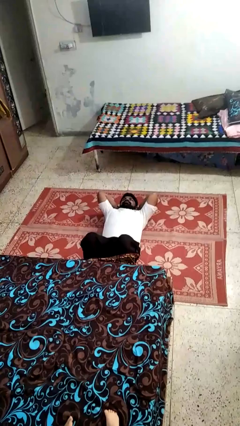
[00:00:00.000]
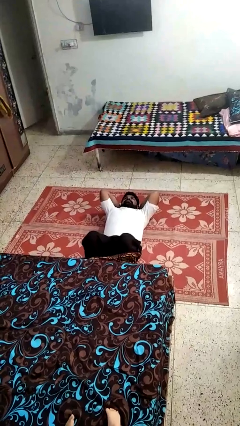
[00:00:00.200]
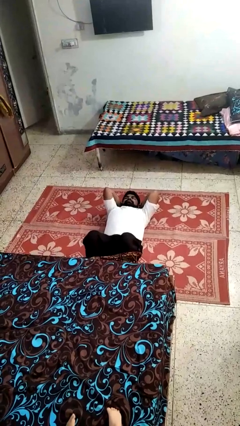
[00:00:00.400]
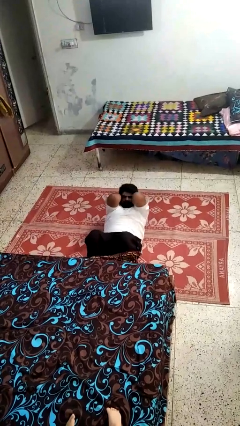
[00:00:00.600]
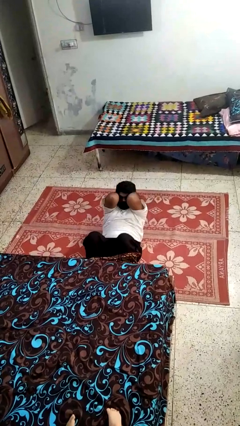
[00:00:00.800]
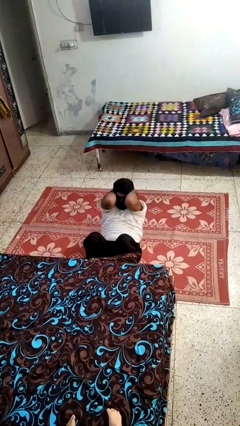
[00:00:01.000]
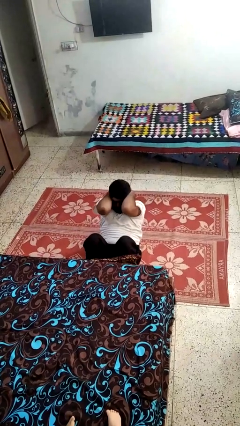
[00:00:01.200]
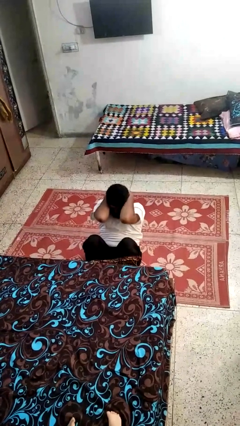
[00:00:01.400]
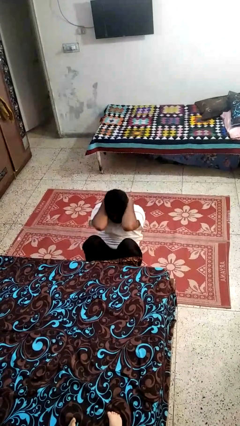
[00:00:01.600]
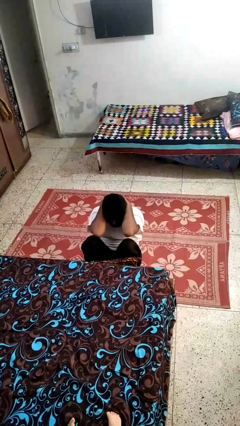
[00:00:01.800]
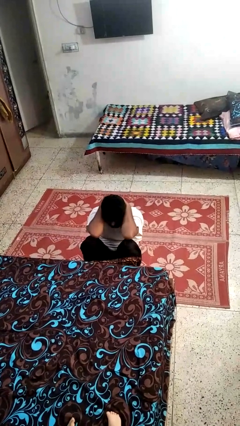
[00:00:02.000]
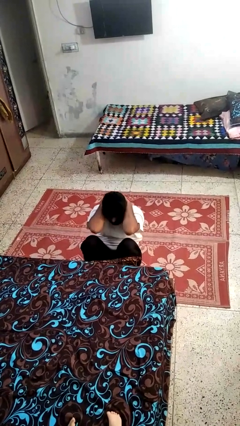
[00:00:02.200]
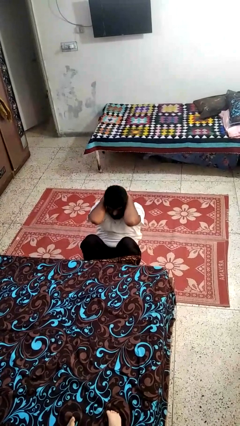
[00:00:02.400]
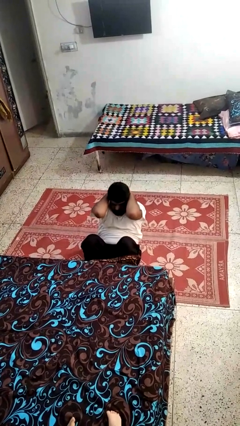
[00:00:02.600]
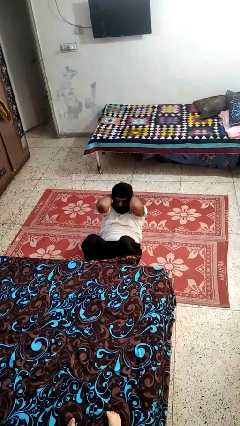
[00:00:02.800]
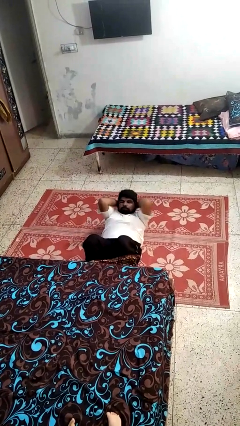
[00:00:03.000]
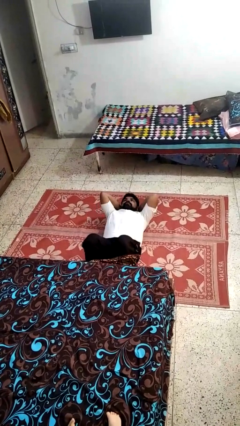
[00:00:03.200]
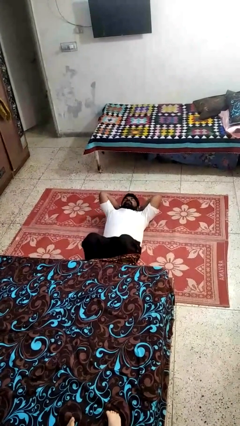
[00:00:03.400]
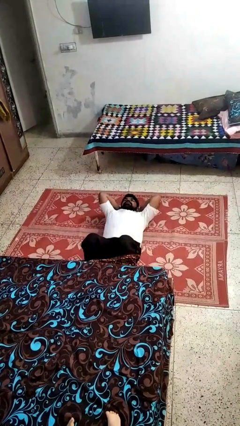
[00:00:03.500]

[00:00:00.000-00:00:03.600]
person exercises with situp

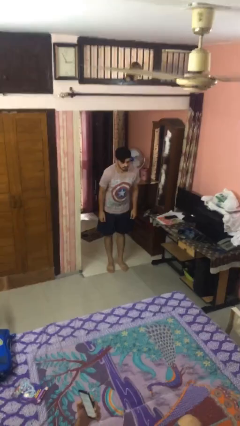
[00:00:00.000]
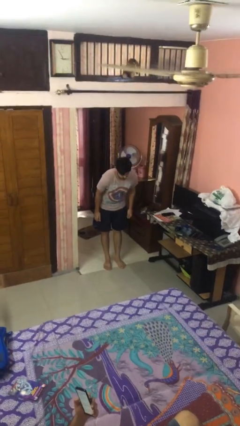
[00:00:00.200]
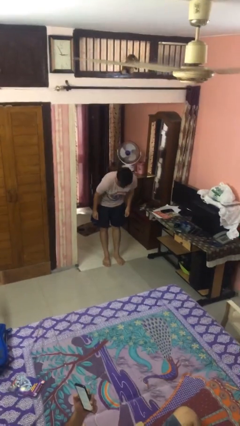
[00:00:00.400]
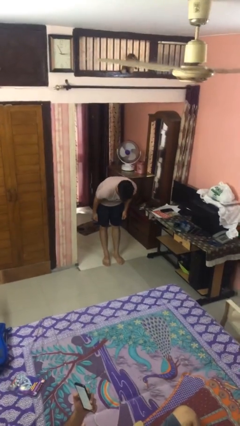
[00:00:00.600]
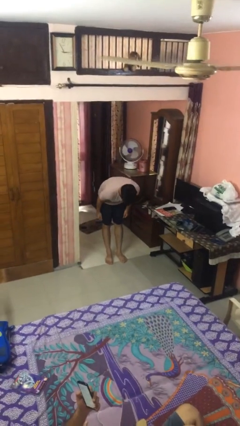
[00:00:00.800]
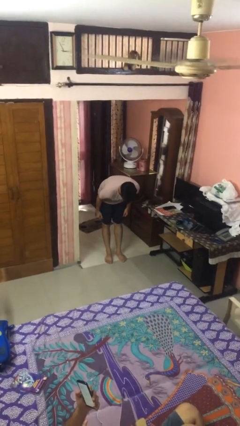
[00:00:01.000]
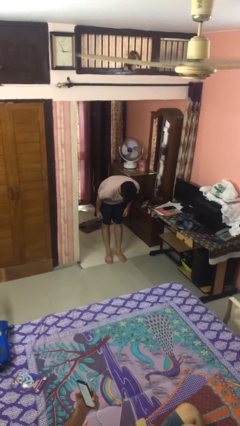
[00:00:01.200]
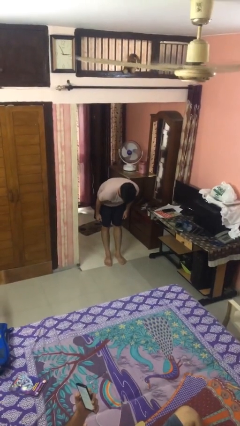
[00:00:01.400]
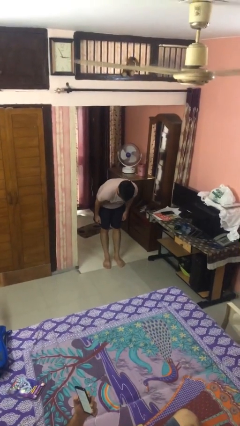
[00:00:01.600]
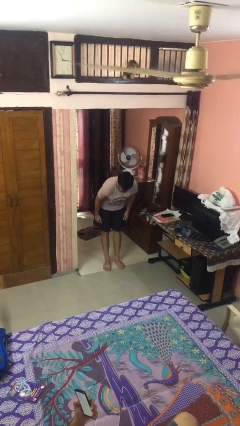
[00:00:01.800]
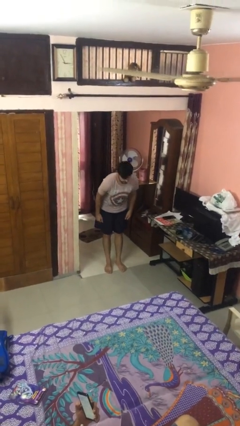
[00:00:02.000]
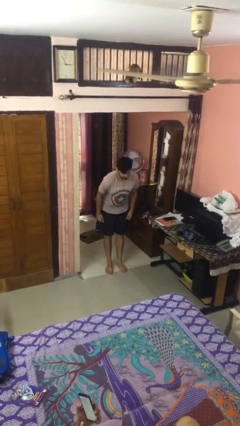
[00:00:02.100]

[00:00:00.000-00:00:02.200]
person bows

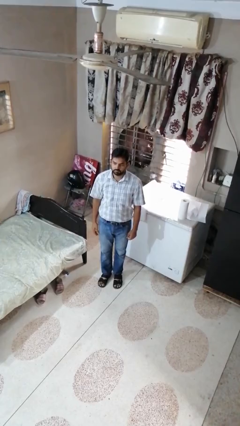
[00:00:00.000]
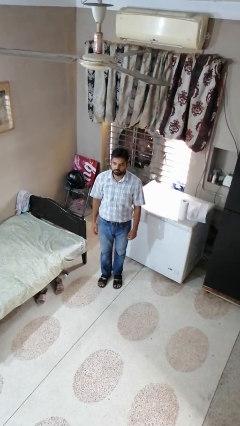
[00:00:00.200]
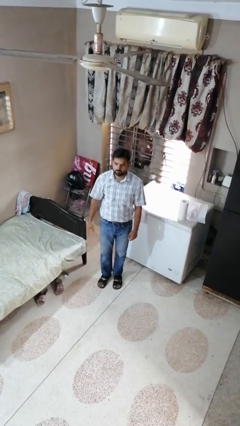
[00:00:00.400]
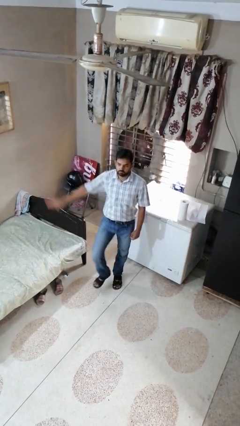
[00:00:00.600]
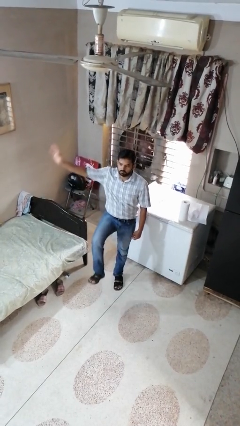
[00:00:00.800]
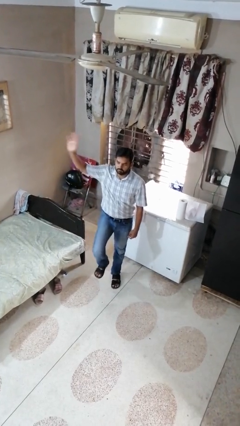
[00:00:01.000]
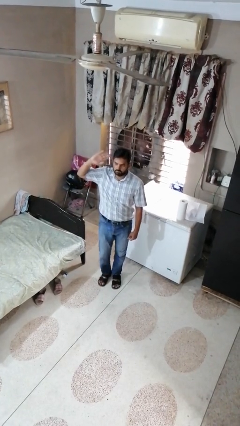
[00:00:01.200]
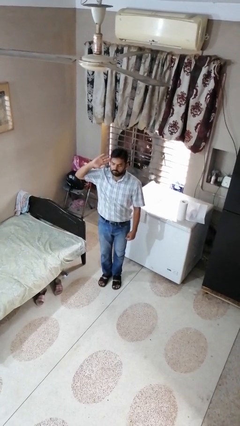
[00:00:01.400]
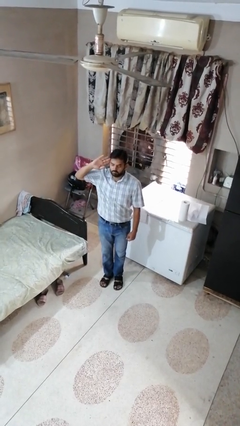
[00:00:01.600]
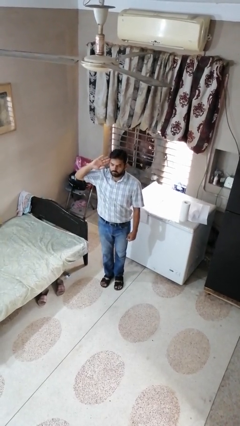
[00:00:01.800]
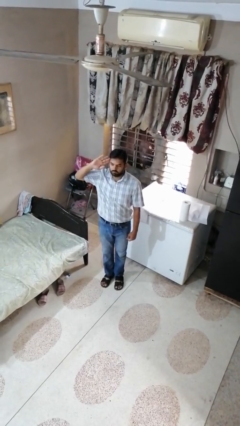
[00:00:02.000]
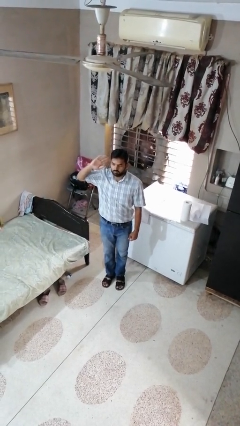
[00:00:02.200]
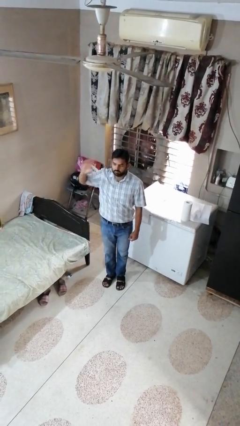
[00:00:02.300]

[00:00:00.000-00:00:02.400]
person salutes

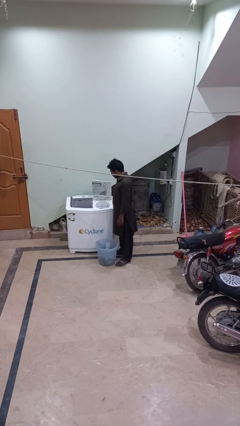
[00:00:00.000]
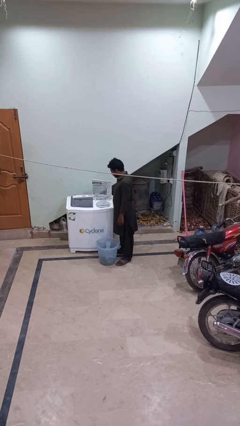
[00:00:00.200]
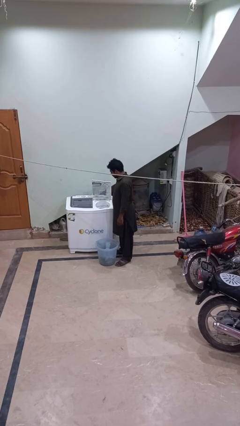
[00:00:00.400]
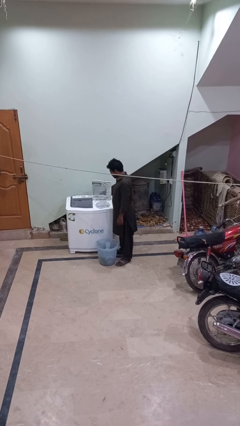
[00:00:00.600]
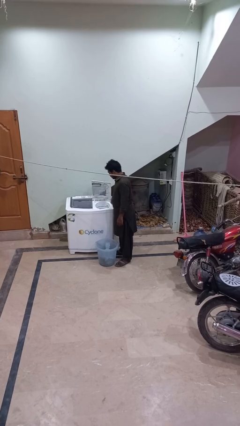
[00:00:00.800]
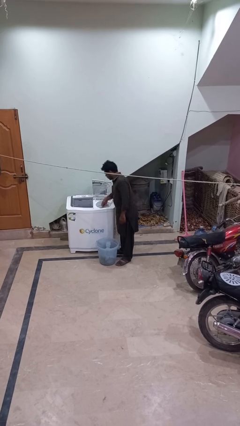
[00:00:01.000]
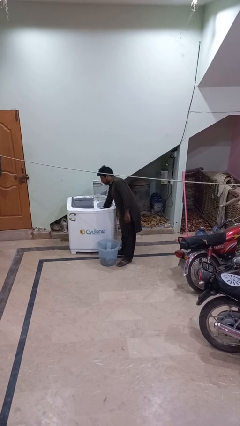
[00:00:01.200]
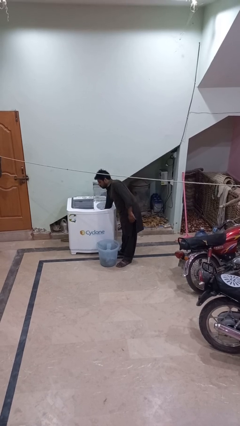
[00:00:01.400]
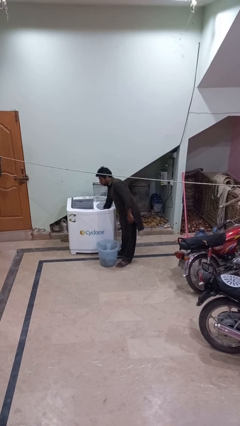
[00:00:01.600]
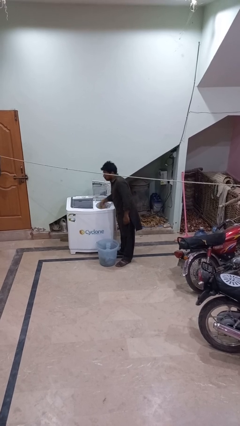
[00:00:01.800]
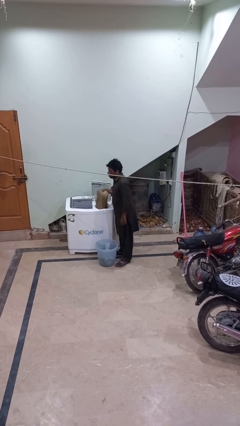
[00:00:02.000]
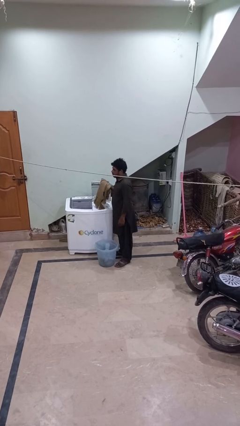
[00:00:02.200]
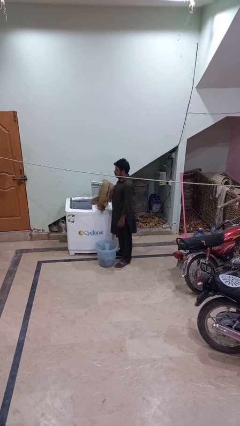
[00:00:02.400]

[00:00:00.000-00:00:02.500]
person unloads dryer

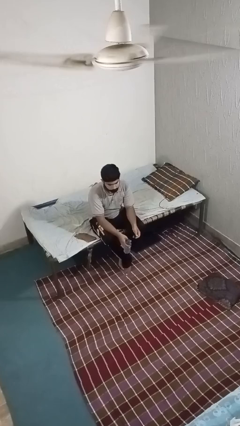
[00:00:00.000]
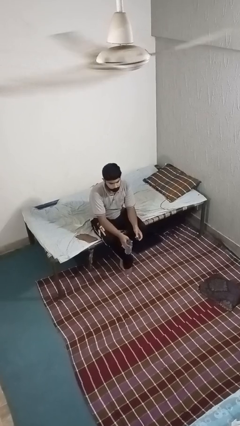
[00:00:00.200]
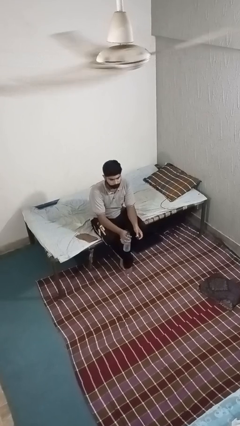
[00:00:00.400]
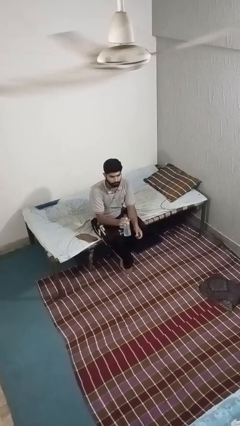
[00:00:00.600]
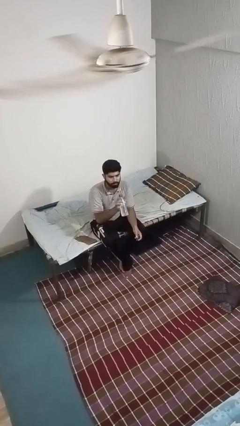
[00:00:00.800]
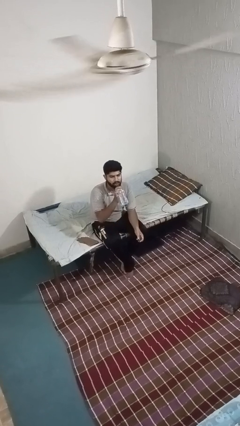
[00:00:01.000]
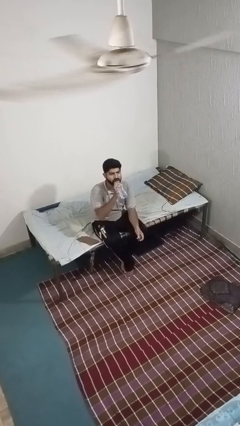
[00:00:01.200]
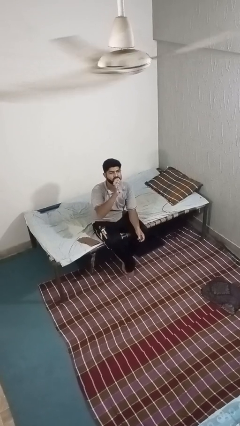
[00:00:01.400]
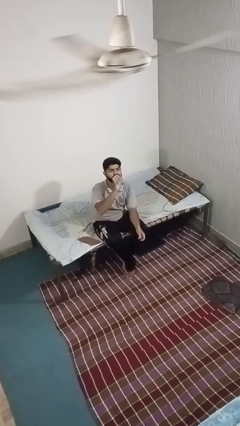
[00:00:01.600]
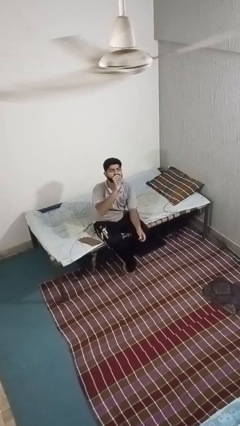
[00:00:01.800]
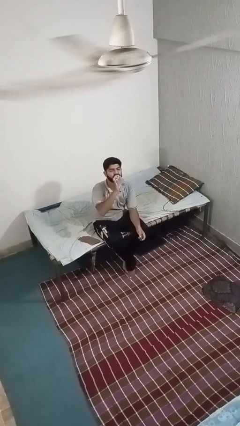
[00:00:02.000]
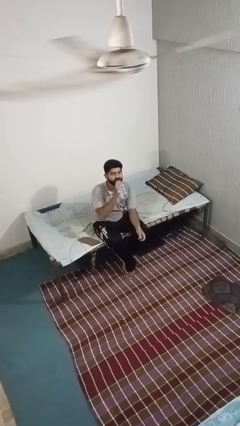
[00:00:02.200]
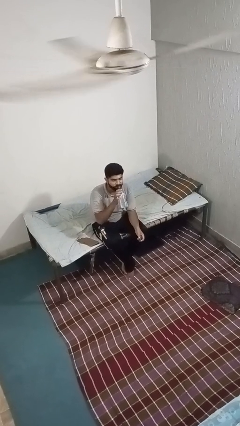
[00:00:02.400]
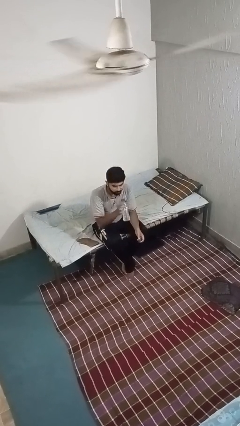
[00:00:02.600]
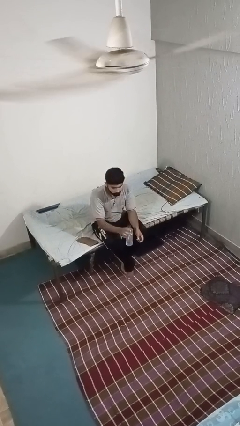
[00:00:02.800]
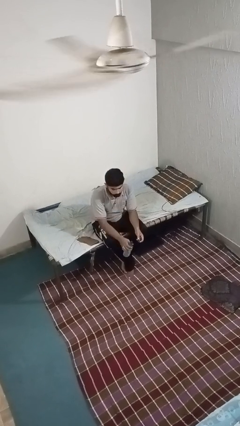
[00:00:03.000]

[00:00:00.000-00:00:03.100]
person drinks from bottle

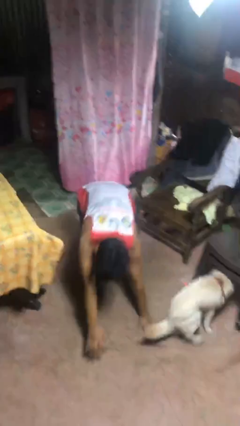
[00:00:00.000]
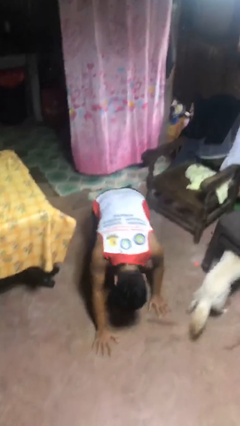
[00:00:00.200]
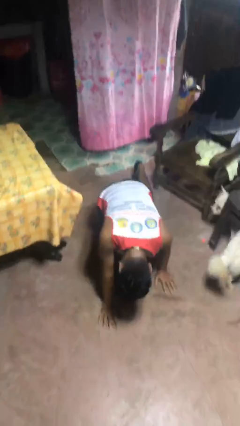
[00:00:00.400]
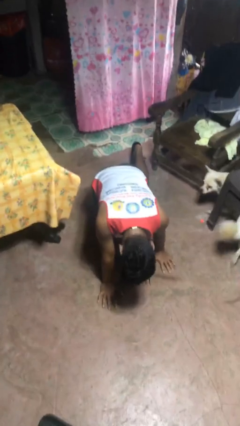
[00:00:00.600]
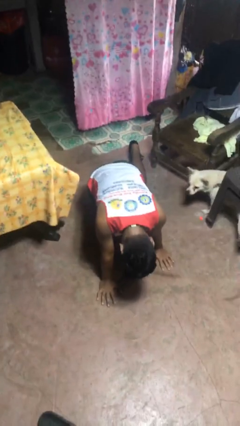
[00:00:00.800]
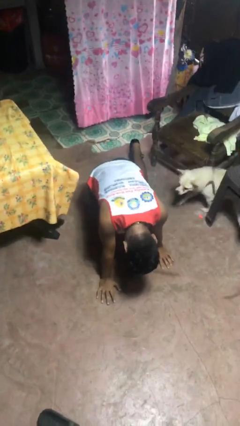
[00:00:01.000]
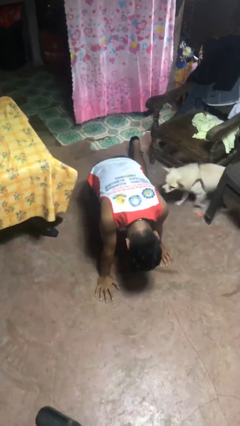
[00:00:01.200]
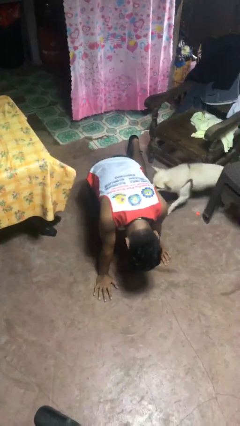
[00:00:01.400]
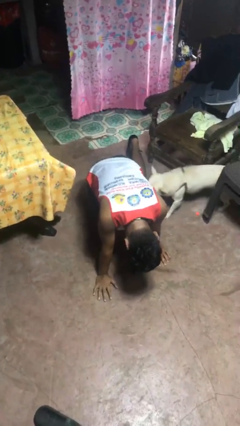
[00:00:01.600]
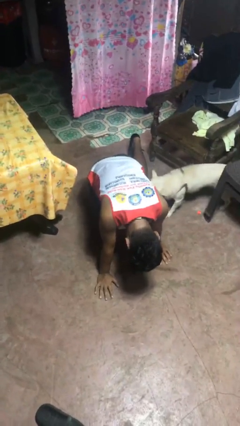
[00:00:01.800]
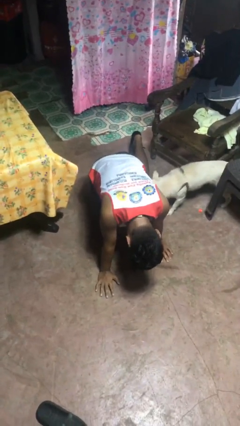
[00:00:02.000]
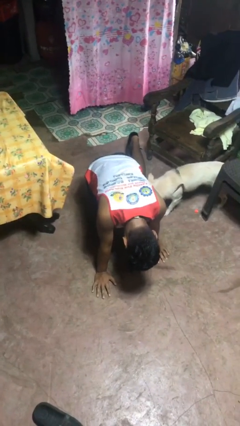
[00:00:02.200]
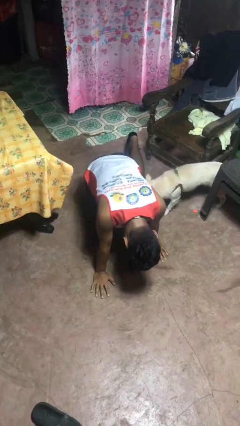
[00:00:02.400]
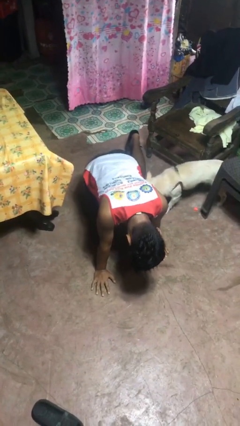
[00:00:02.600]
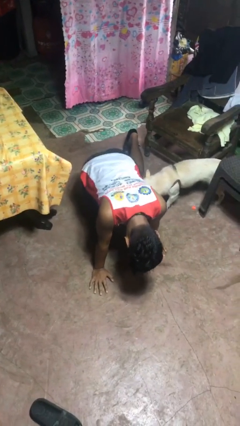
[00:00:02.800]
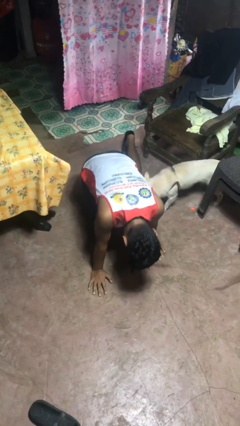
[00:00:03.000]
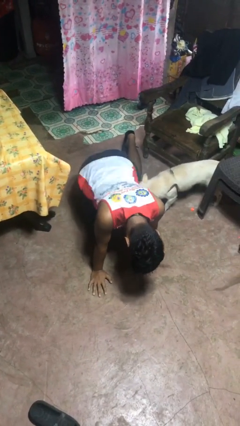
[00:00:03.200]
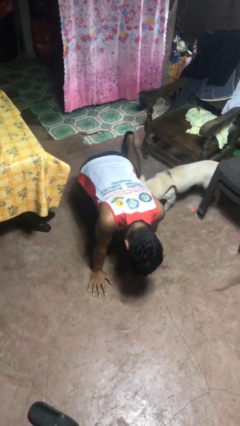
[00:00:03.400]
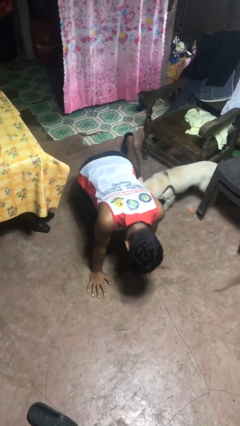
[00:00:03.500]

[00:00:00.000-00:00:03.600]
person lies down on floor
